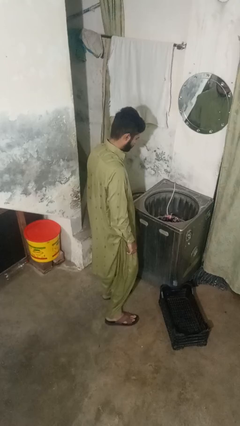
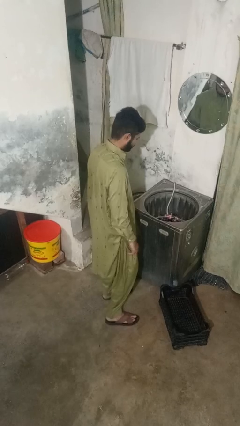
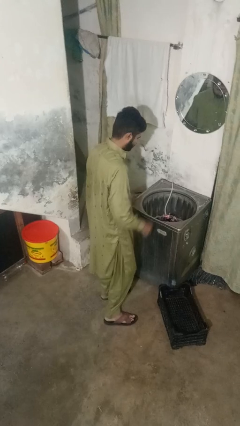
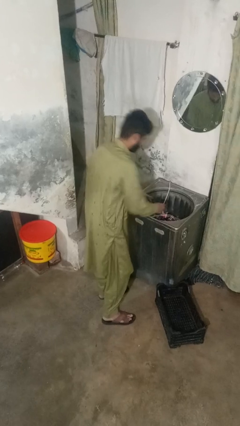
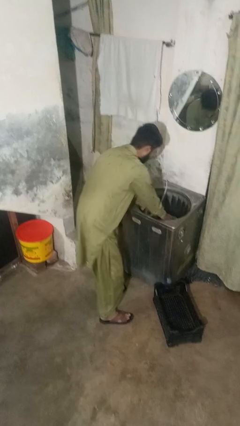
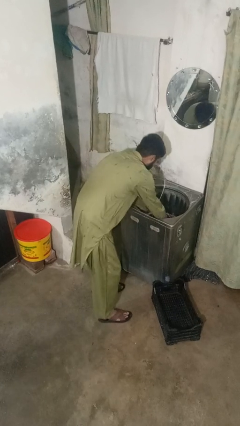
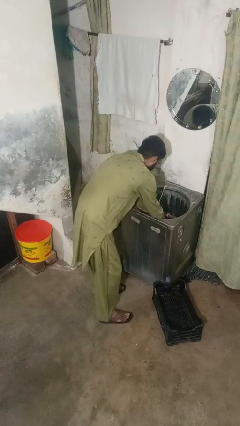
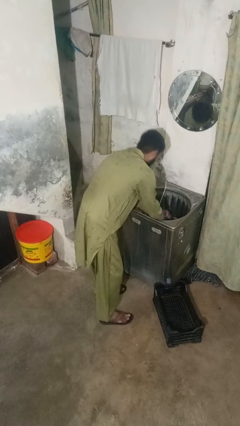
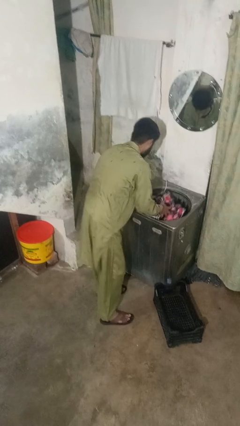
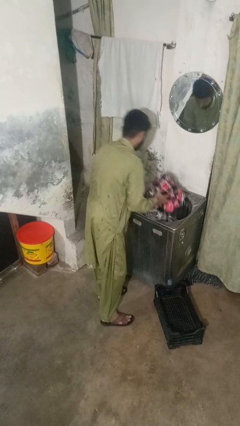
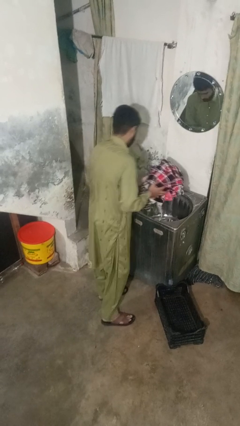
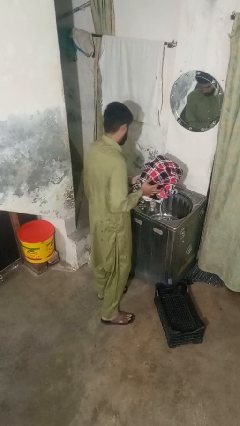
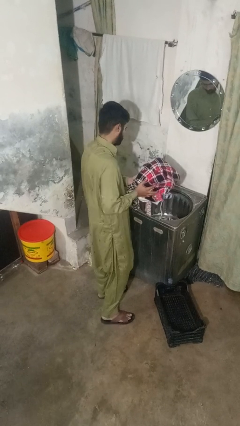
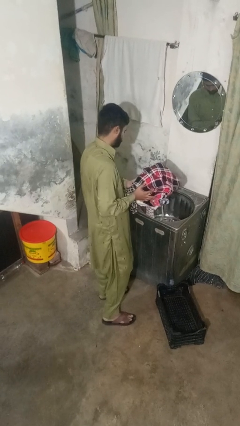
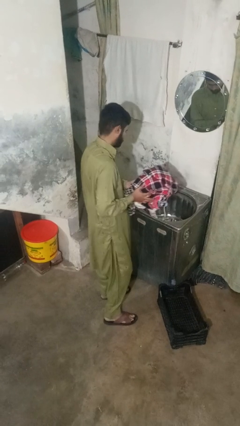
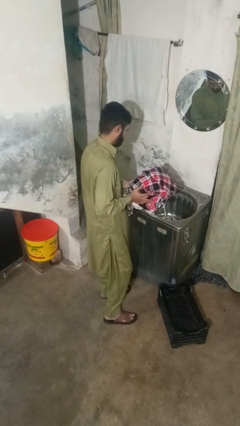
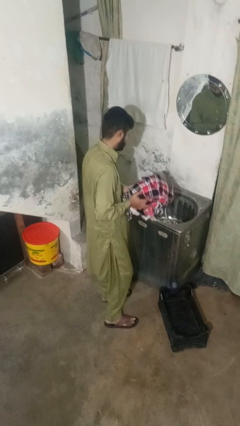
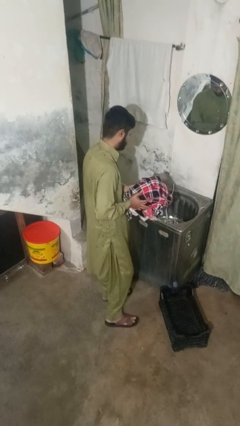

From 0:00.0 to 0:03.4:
person unloads clotheswasher

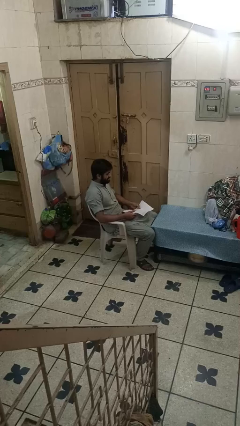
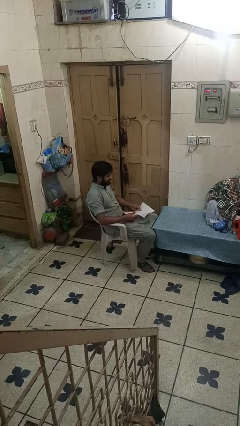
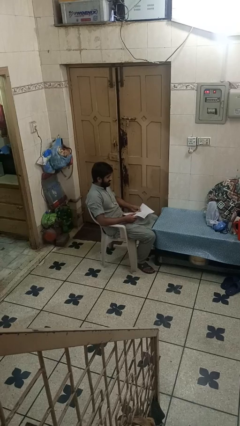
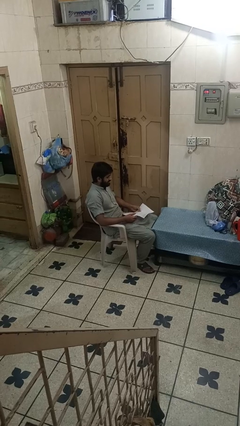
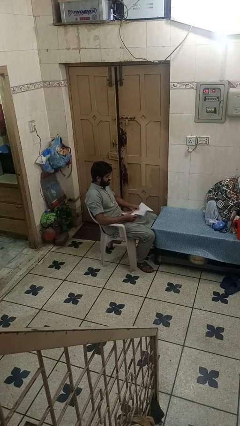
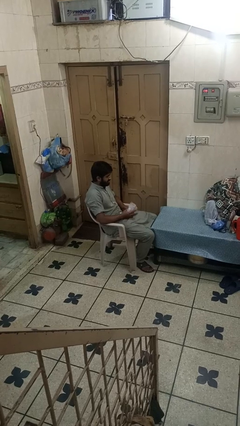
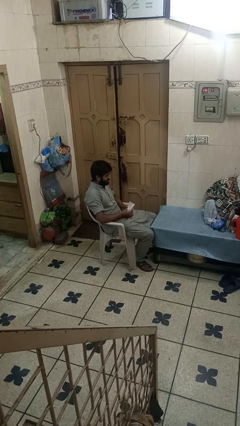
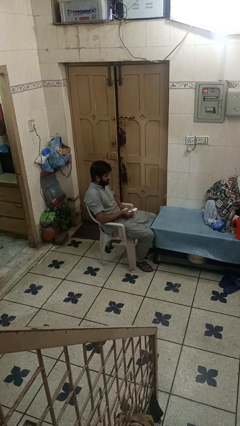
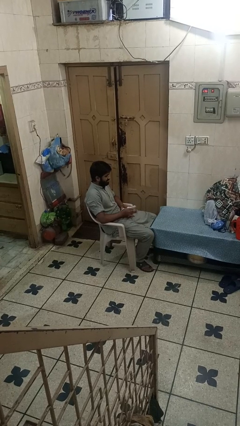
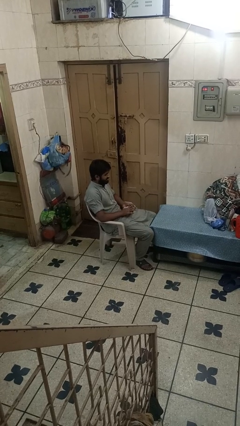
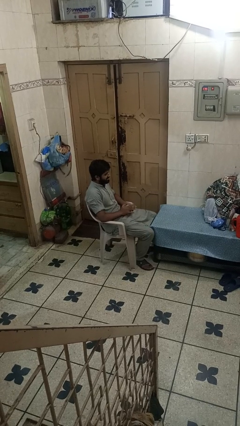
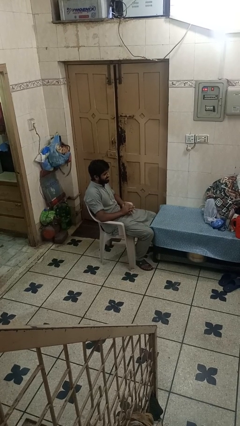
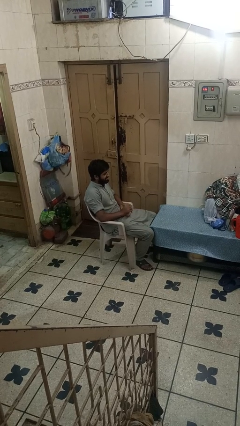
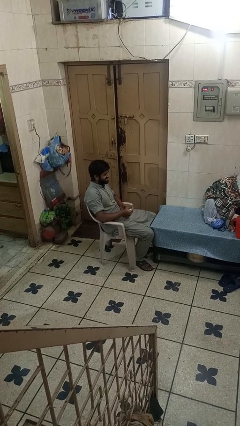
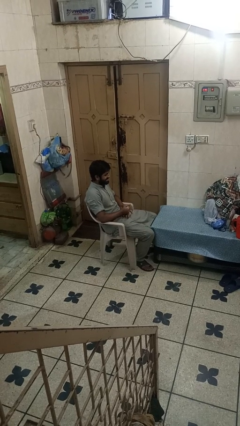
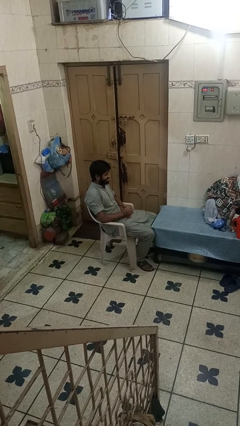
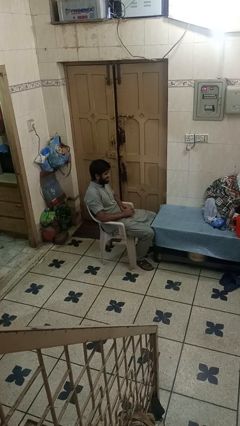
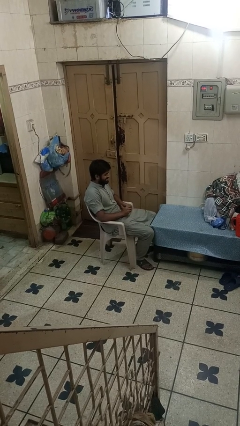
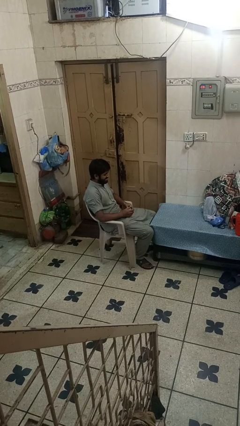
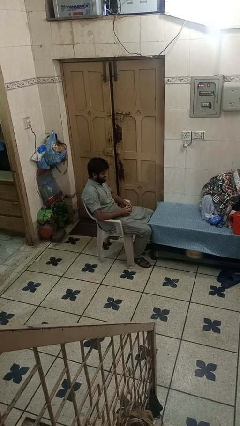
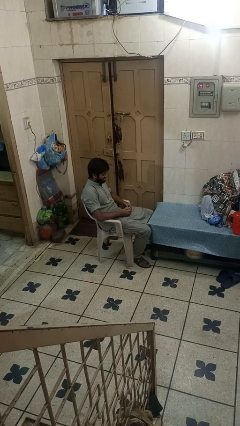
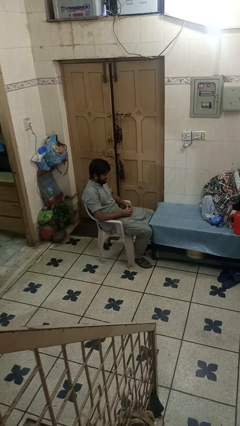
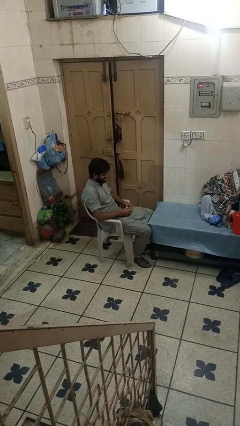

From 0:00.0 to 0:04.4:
person crumples paper

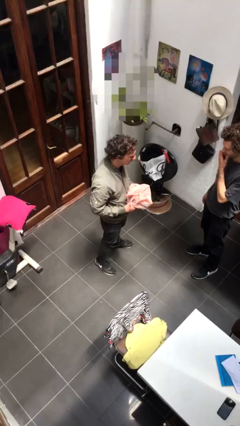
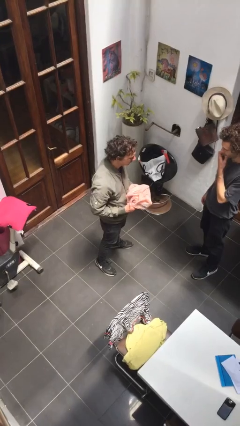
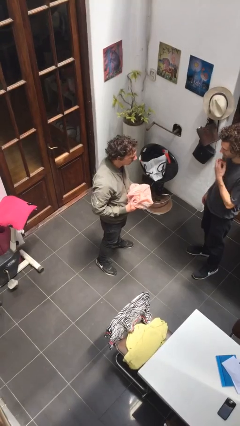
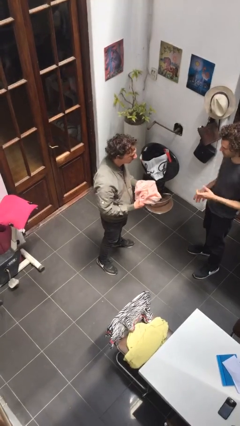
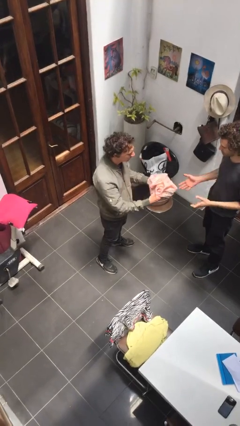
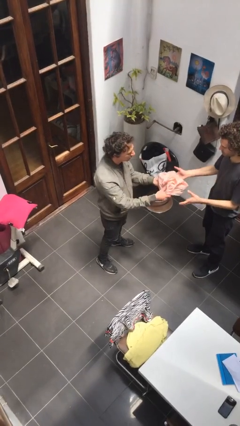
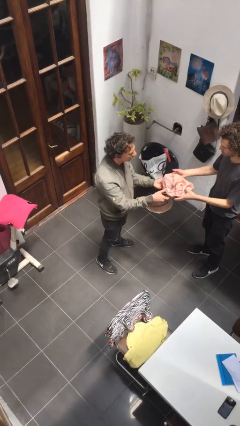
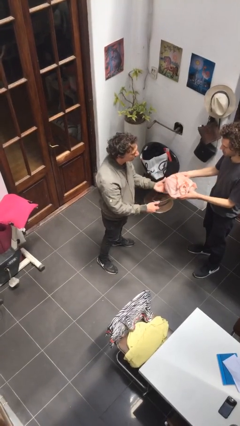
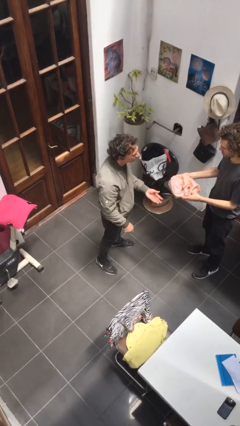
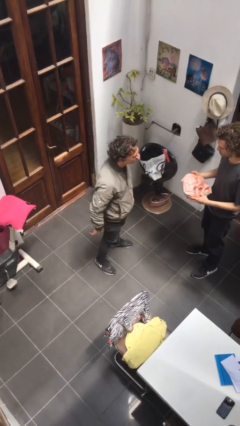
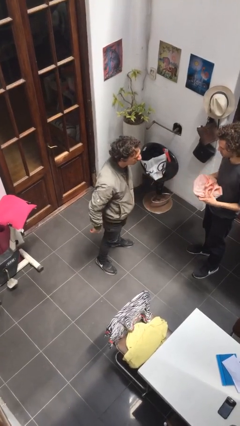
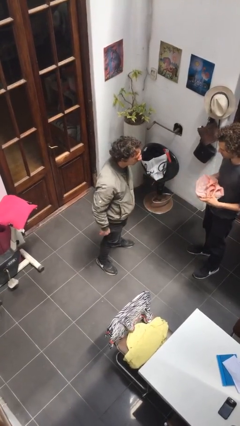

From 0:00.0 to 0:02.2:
person transfers object to person

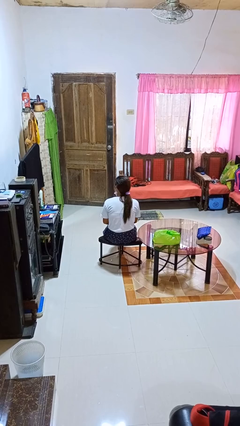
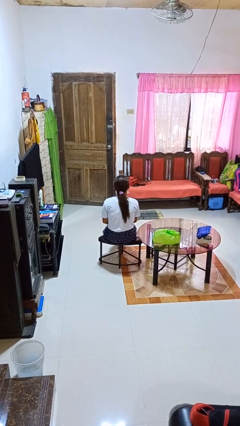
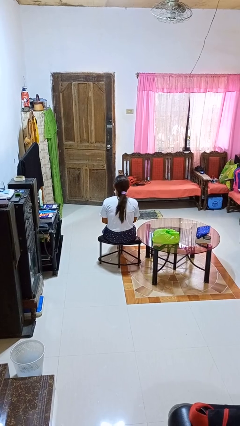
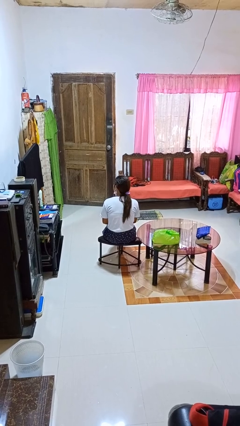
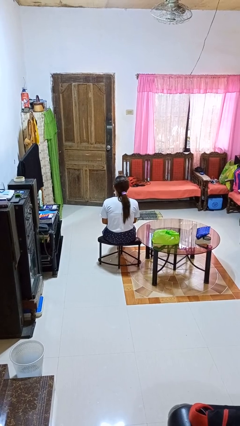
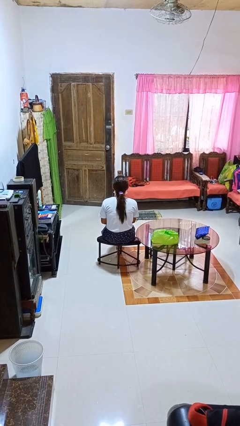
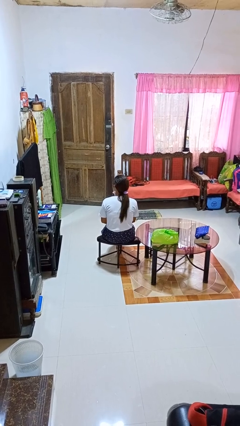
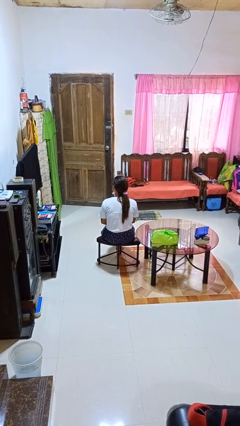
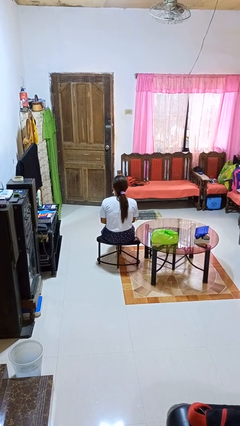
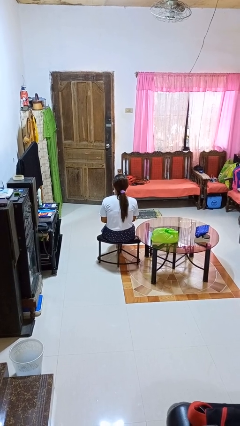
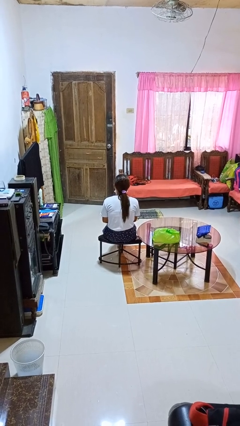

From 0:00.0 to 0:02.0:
person shakes head

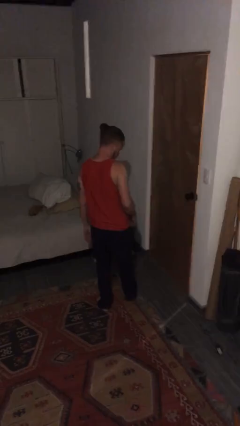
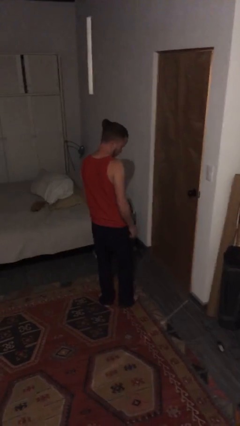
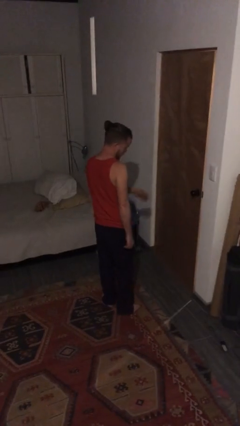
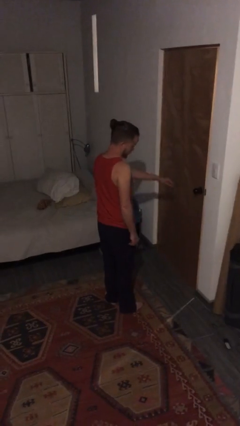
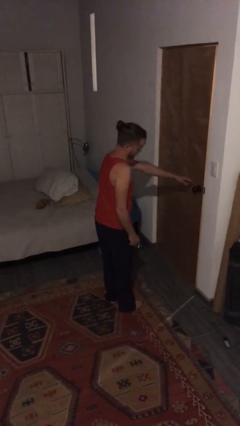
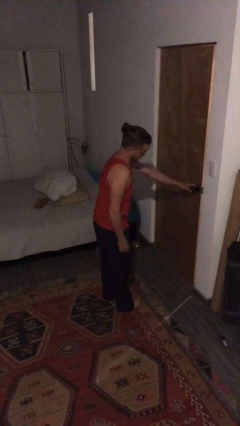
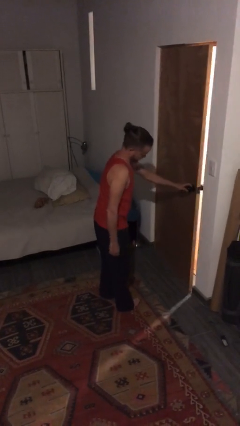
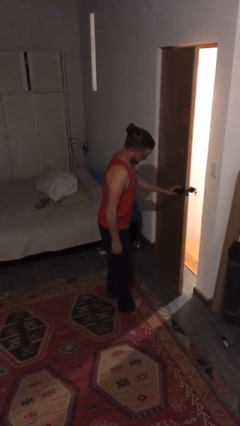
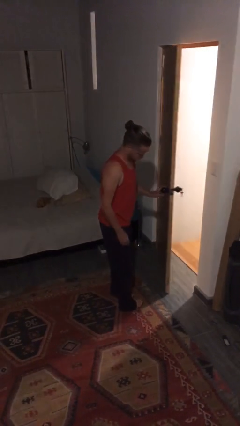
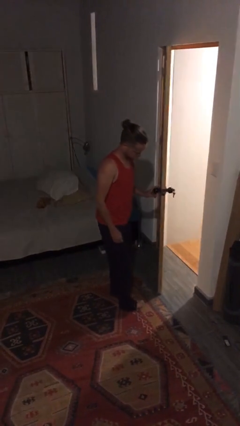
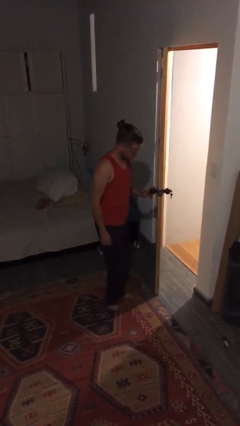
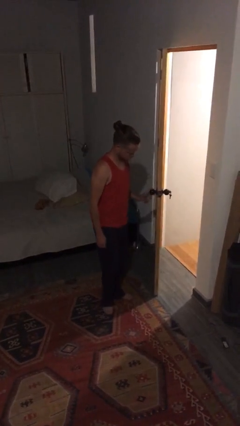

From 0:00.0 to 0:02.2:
person opens facility door

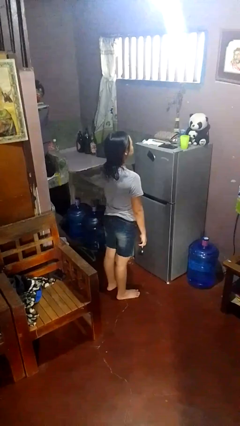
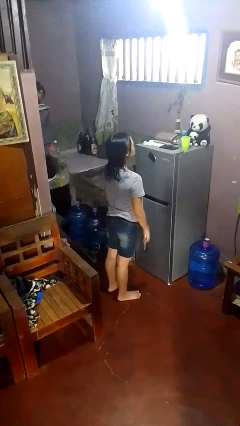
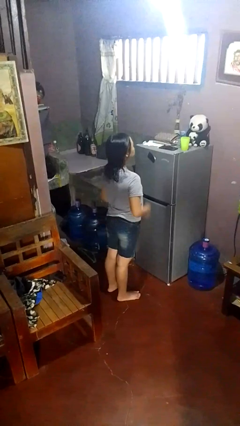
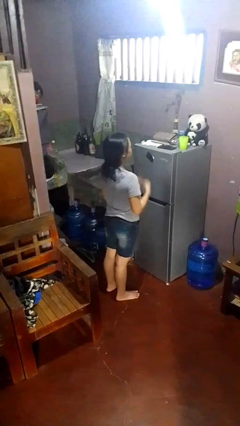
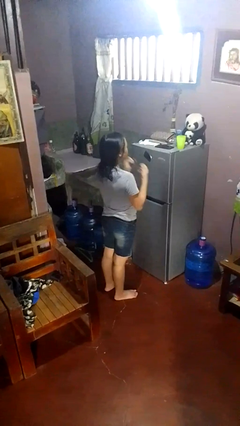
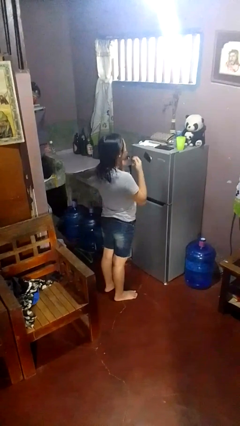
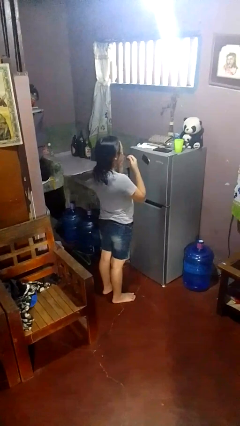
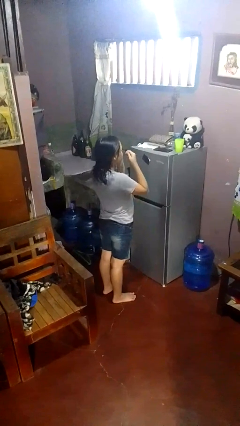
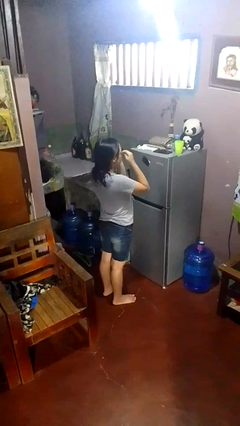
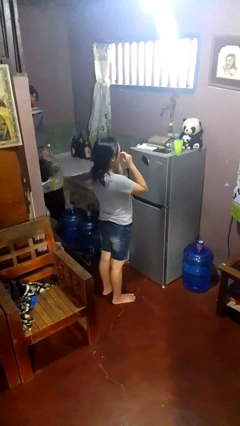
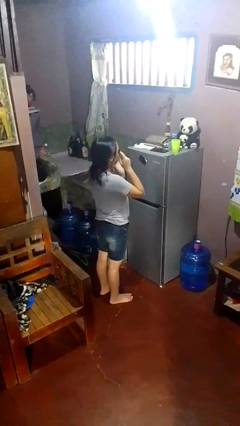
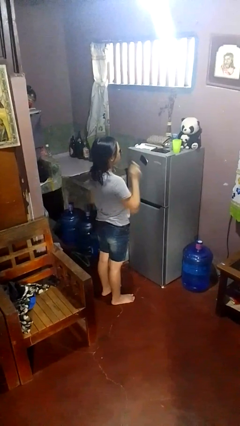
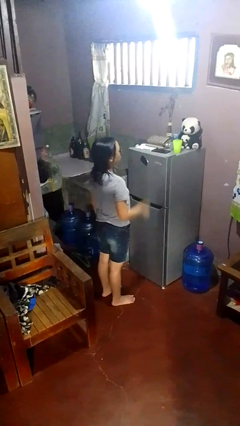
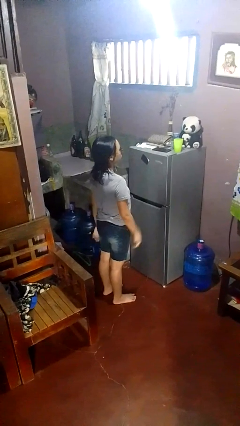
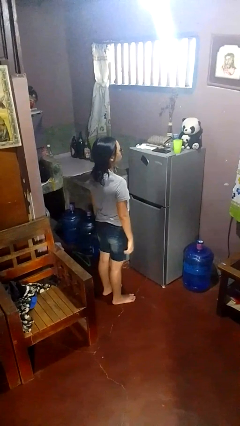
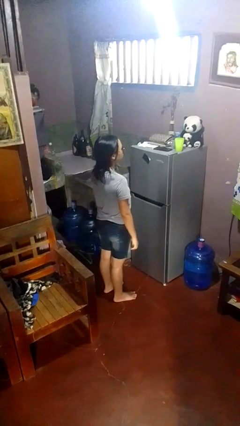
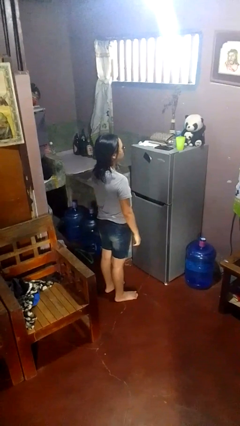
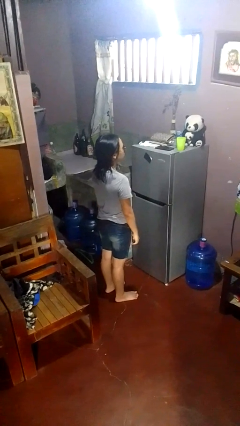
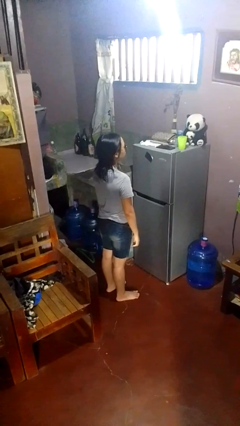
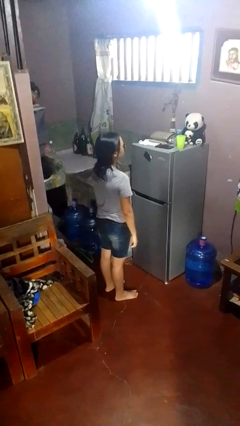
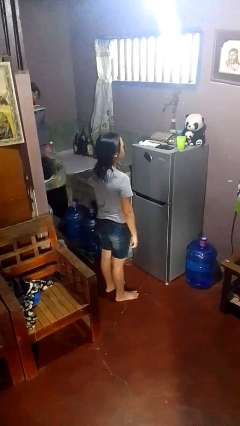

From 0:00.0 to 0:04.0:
person puts on sunglasses
